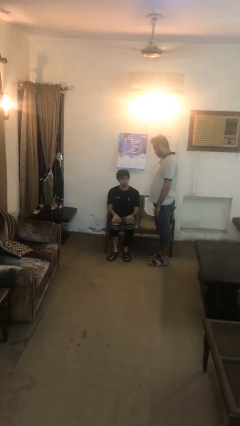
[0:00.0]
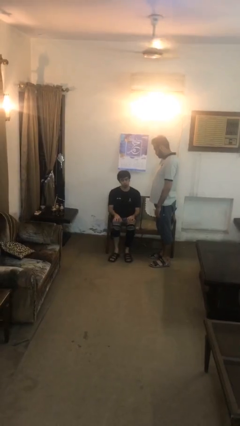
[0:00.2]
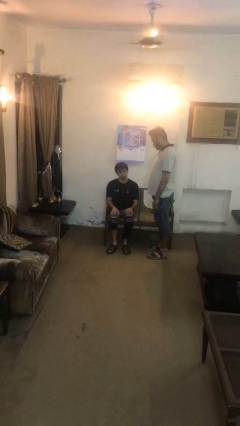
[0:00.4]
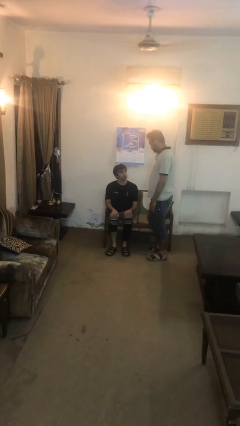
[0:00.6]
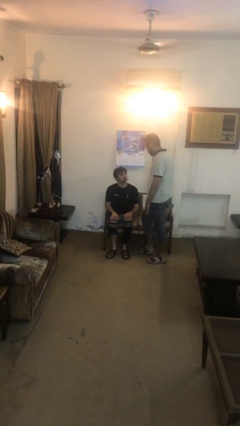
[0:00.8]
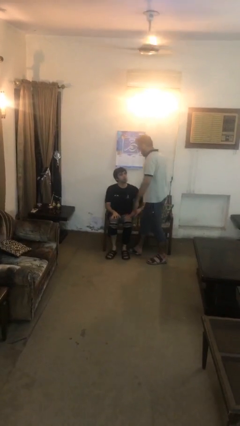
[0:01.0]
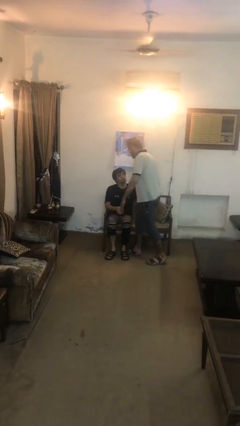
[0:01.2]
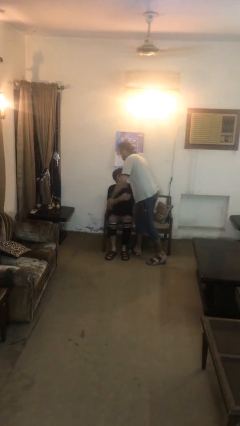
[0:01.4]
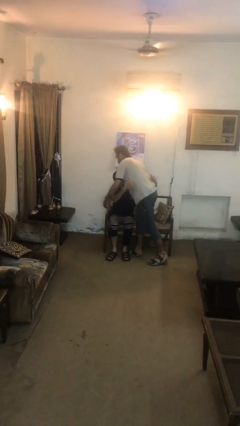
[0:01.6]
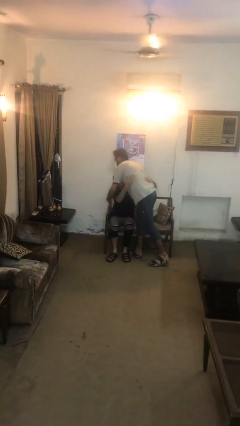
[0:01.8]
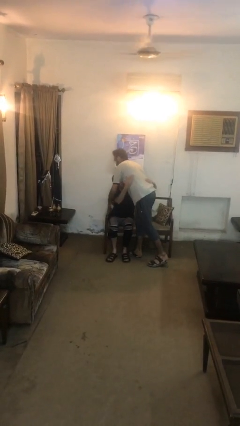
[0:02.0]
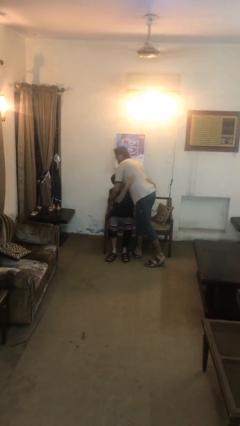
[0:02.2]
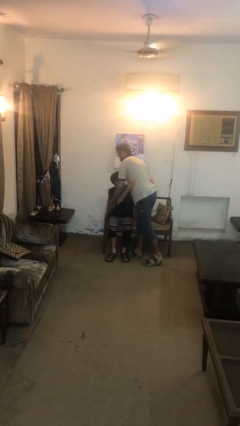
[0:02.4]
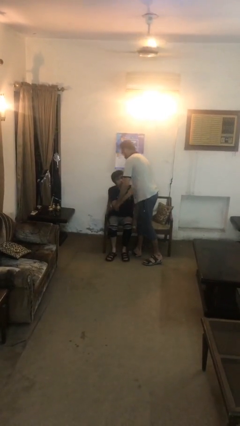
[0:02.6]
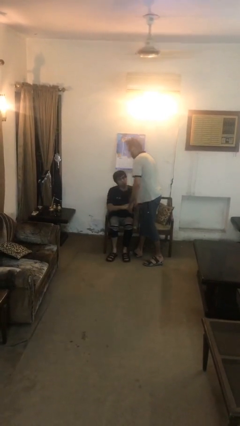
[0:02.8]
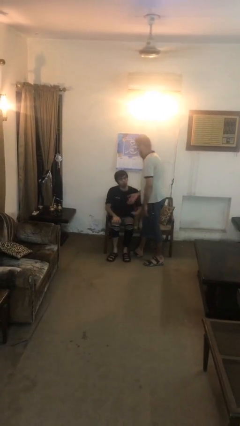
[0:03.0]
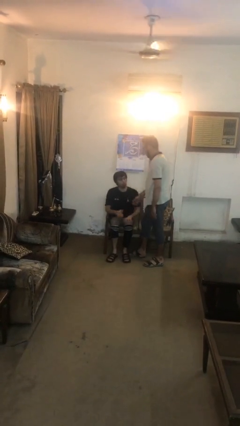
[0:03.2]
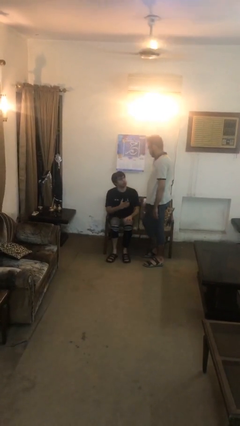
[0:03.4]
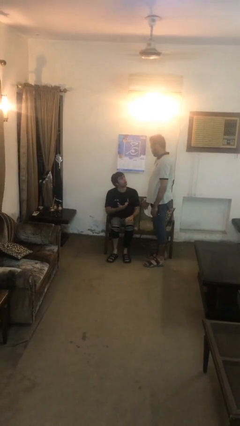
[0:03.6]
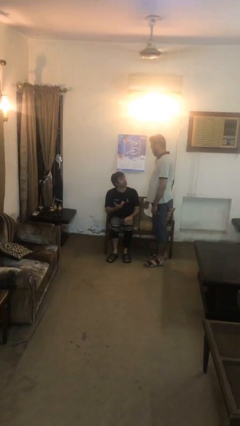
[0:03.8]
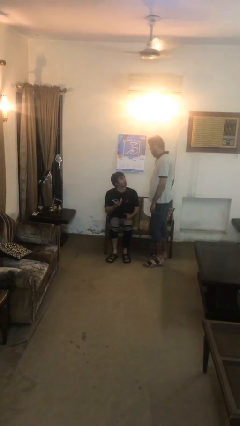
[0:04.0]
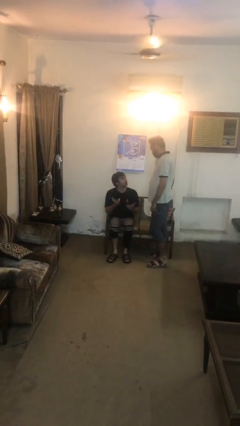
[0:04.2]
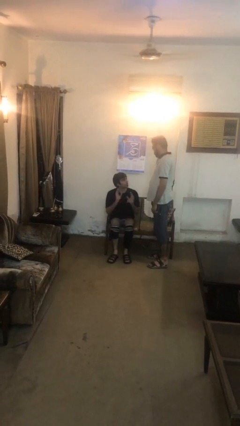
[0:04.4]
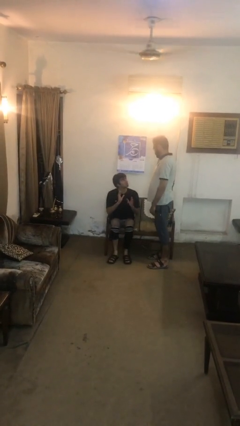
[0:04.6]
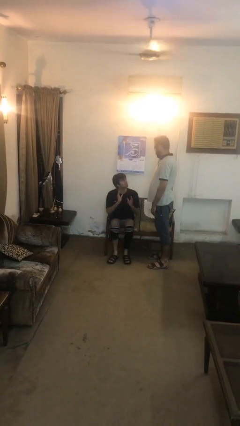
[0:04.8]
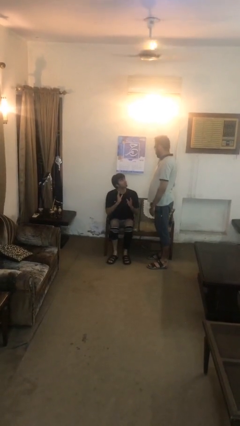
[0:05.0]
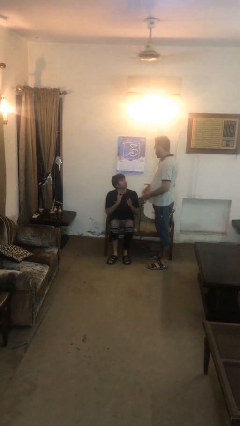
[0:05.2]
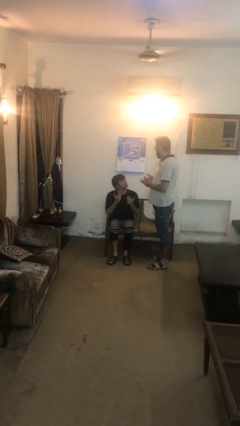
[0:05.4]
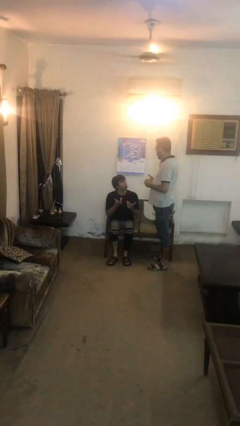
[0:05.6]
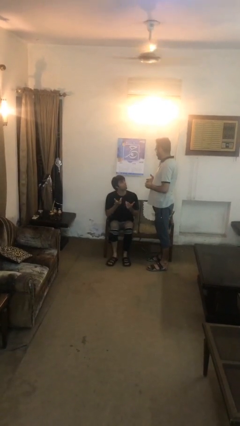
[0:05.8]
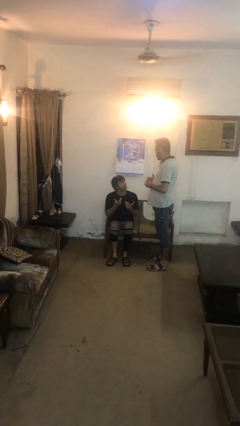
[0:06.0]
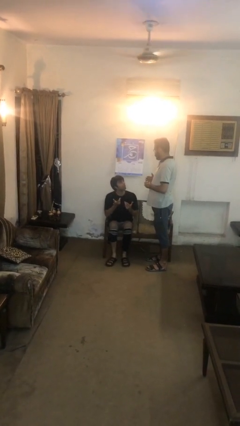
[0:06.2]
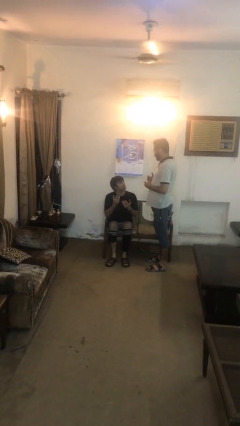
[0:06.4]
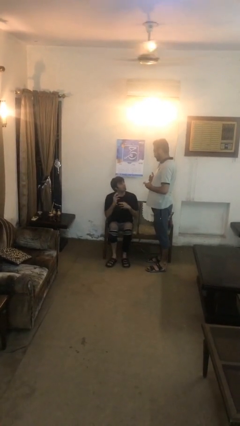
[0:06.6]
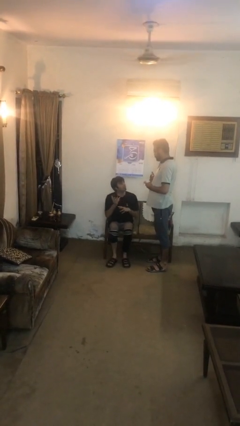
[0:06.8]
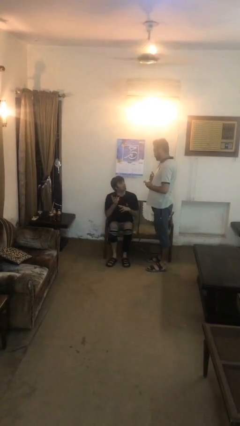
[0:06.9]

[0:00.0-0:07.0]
person embraces person

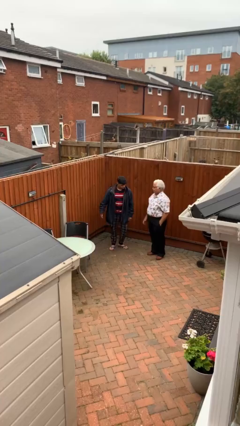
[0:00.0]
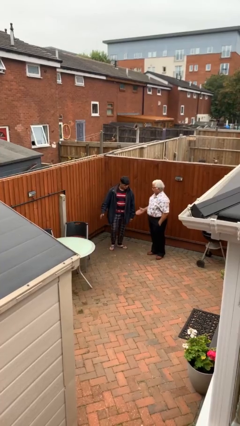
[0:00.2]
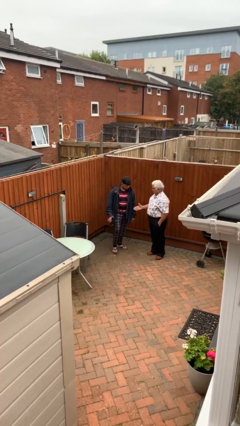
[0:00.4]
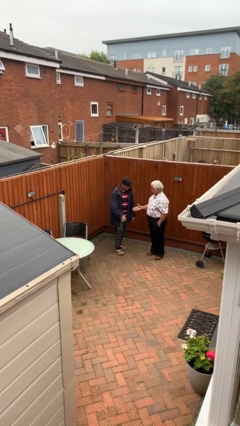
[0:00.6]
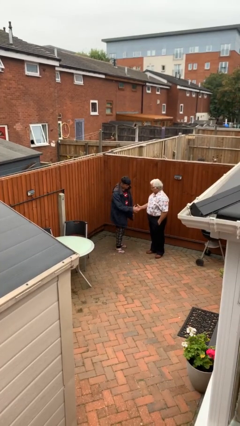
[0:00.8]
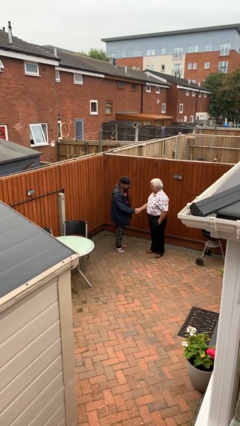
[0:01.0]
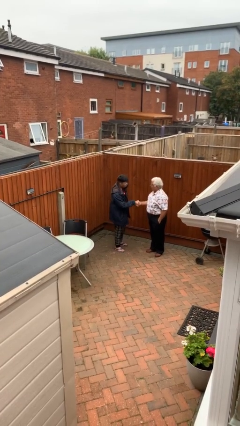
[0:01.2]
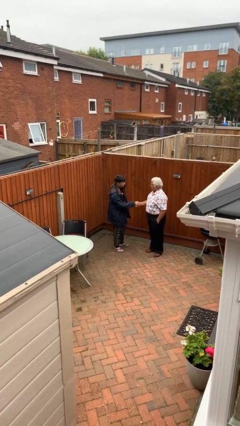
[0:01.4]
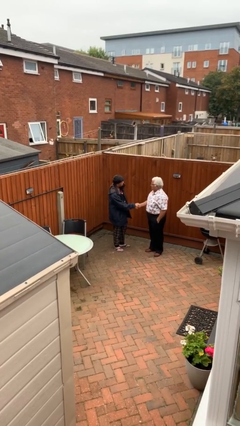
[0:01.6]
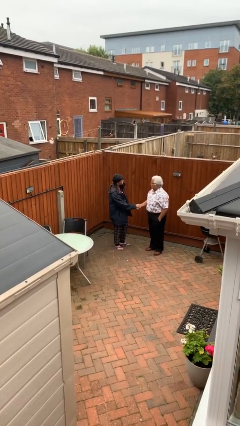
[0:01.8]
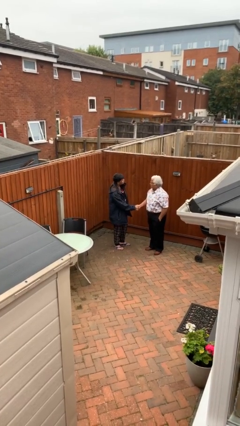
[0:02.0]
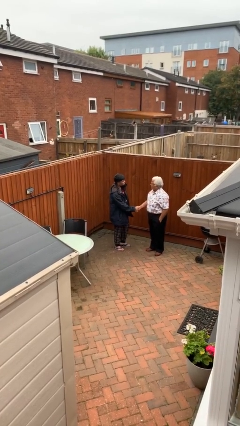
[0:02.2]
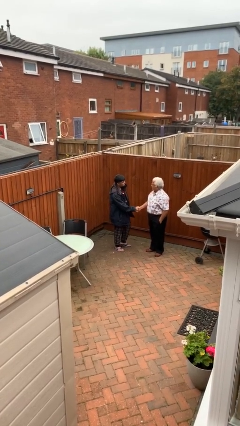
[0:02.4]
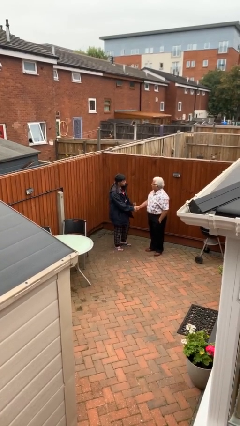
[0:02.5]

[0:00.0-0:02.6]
person shakes hand

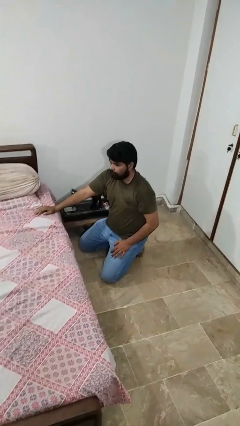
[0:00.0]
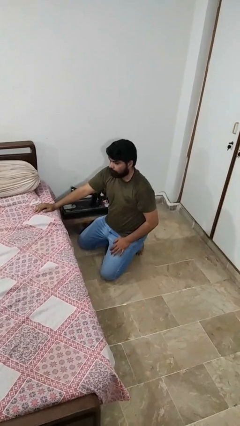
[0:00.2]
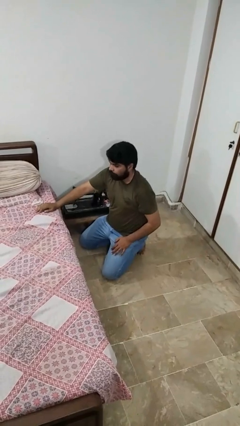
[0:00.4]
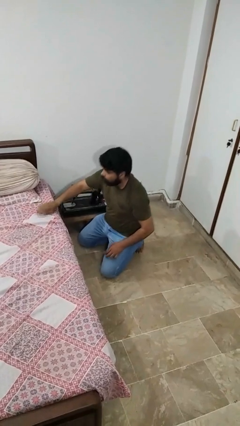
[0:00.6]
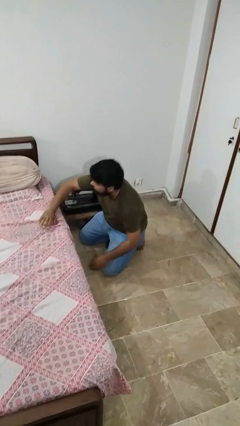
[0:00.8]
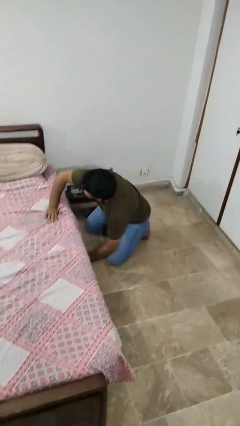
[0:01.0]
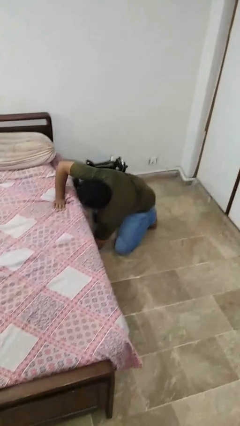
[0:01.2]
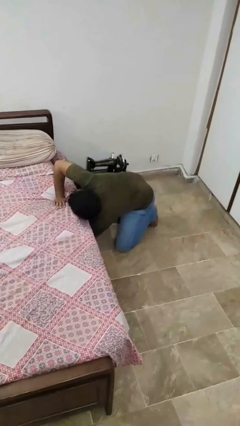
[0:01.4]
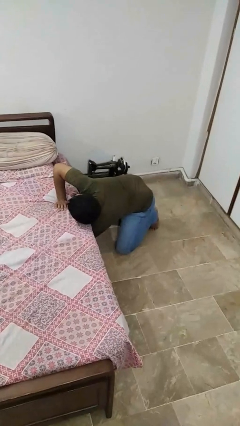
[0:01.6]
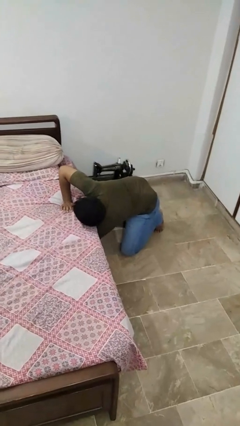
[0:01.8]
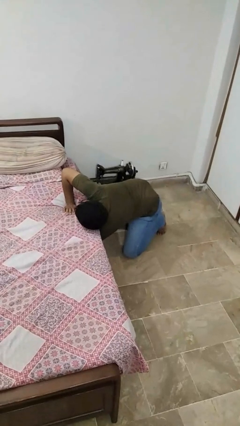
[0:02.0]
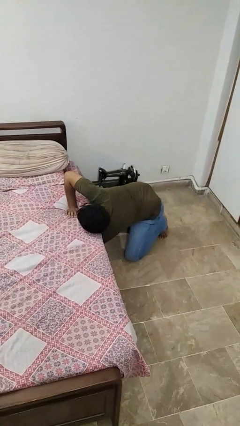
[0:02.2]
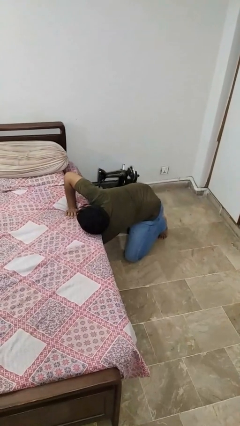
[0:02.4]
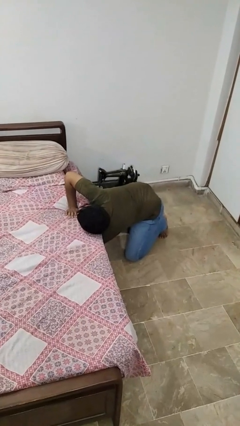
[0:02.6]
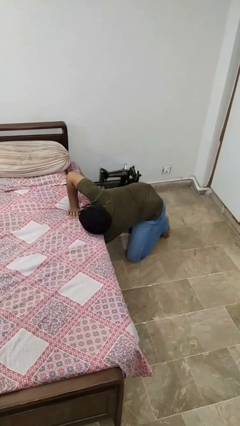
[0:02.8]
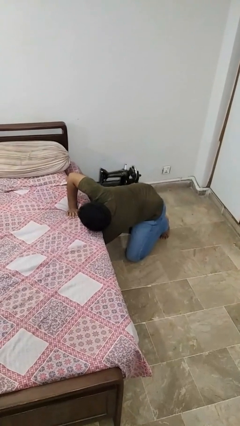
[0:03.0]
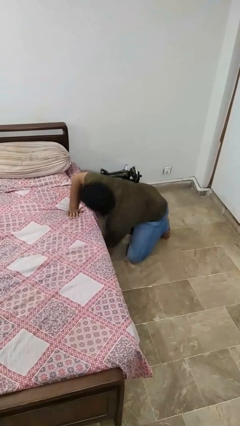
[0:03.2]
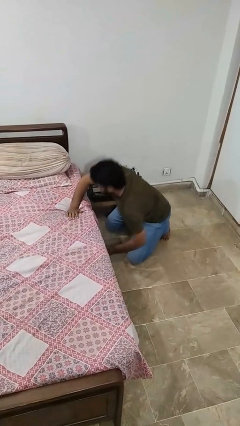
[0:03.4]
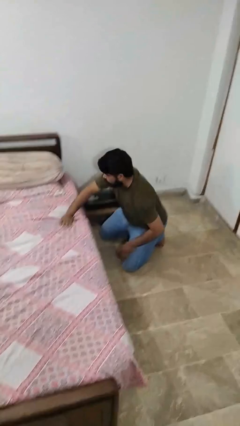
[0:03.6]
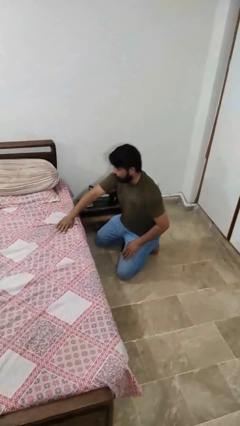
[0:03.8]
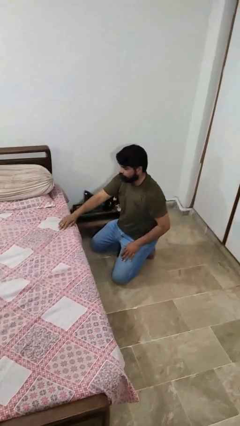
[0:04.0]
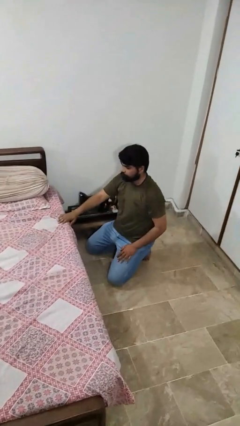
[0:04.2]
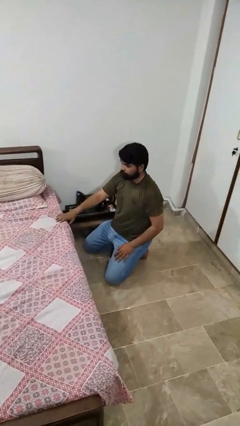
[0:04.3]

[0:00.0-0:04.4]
person searches under bed

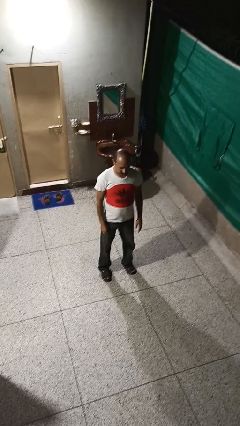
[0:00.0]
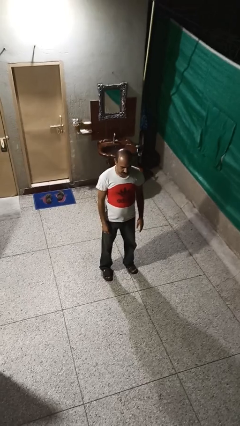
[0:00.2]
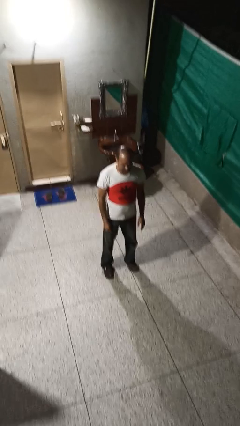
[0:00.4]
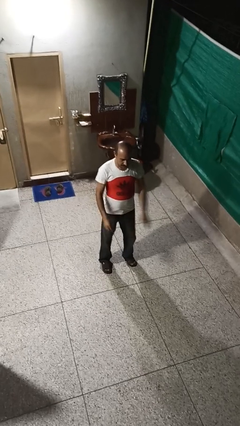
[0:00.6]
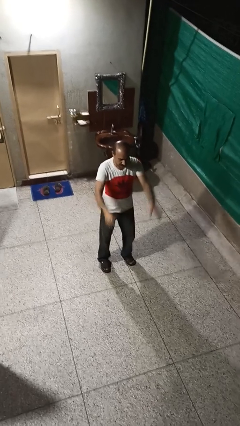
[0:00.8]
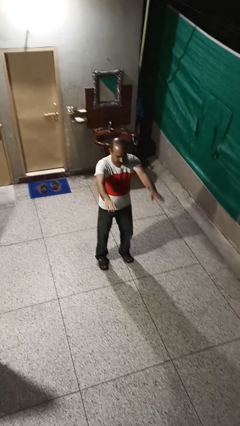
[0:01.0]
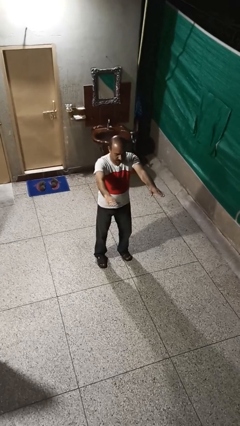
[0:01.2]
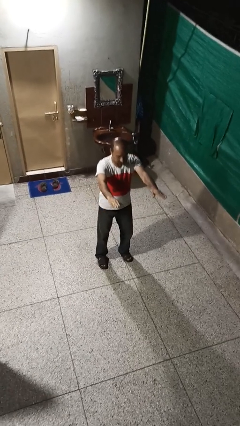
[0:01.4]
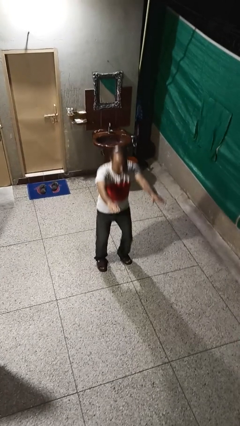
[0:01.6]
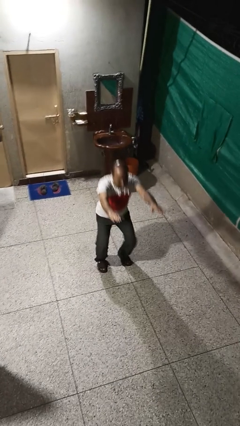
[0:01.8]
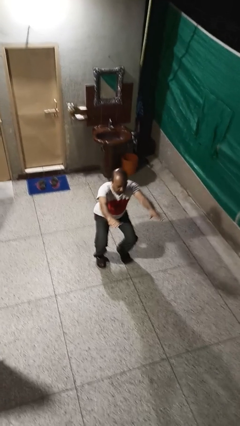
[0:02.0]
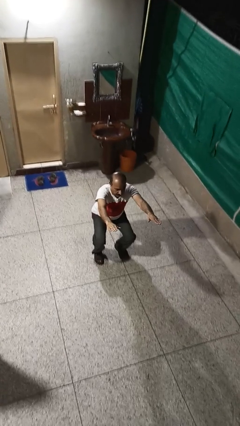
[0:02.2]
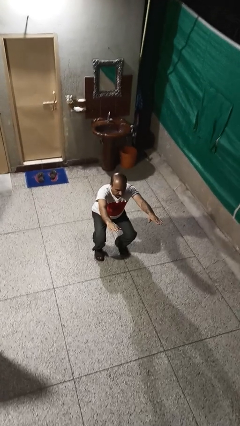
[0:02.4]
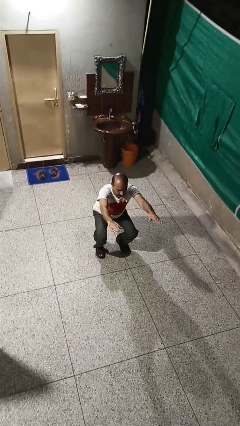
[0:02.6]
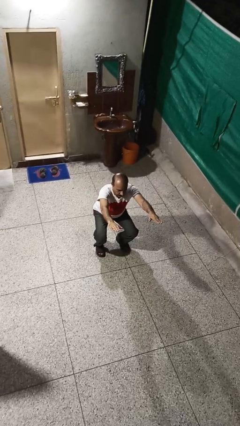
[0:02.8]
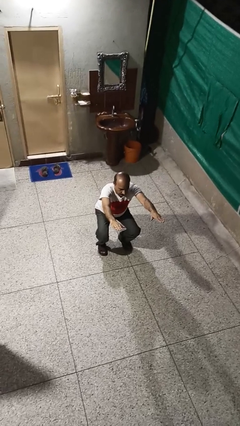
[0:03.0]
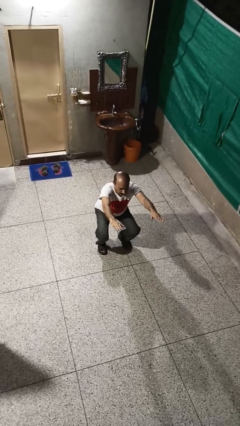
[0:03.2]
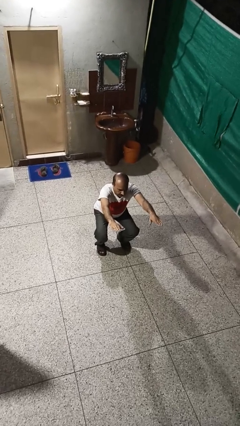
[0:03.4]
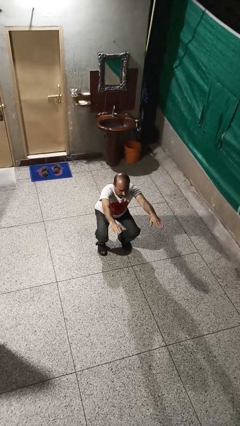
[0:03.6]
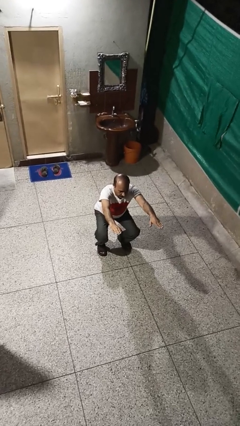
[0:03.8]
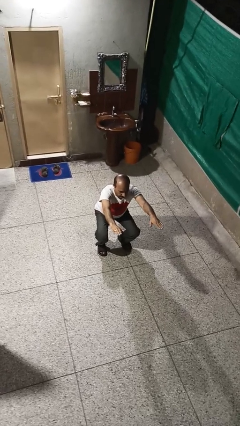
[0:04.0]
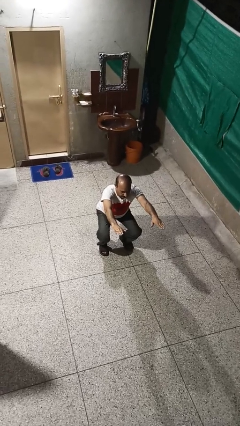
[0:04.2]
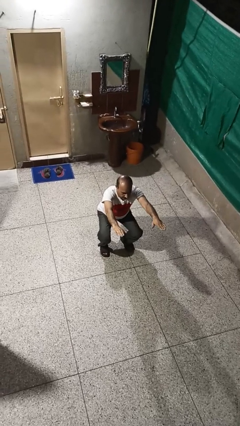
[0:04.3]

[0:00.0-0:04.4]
person squats
